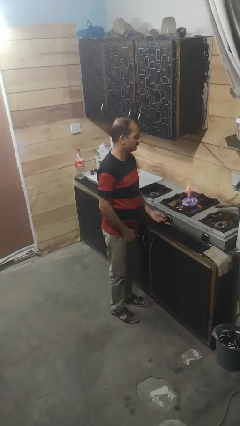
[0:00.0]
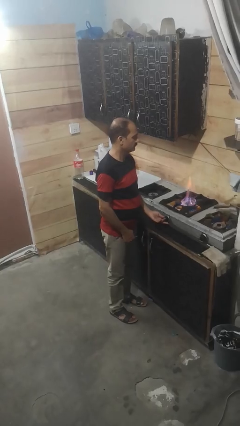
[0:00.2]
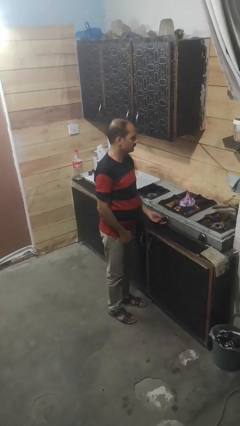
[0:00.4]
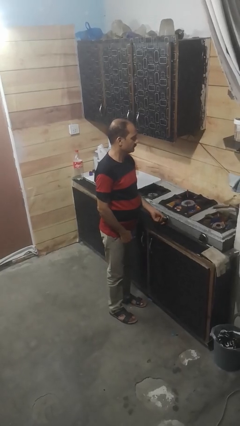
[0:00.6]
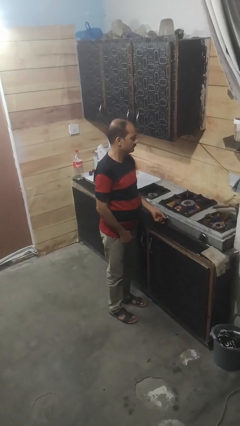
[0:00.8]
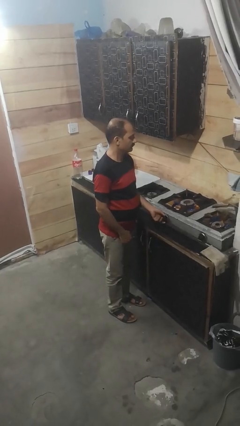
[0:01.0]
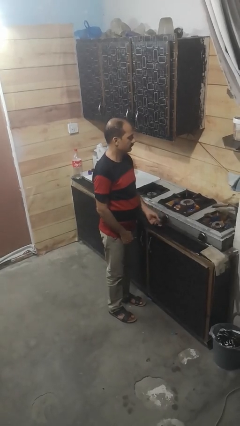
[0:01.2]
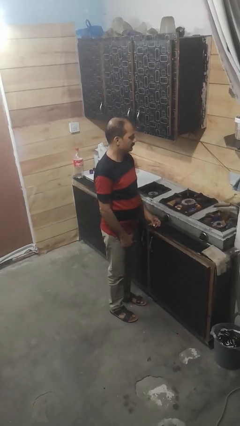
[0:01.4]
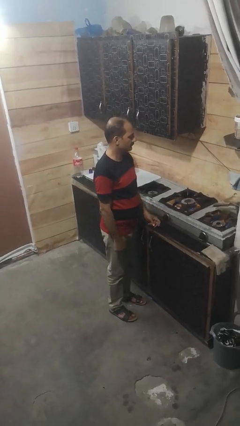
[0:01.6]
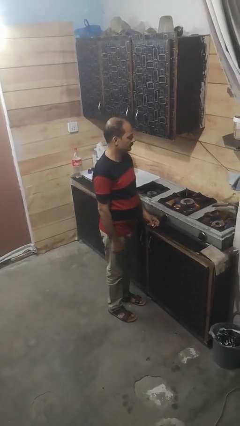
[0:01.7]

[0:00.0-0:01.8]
person turns off stovetop

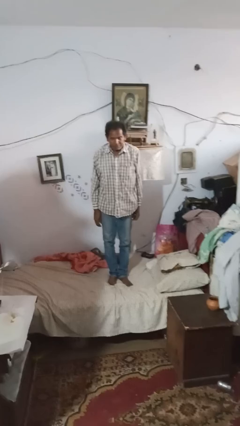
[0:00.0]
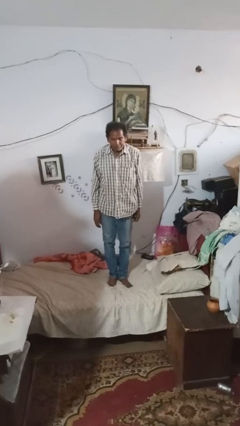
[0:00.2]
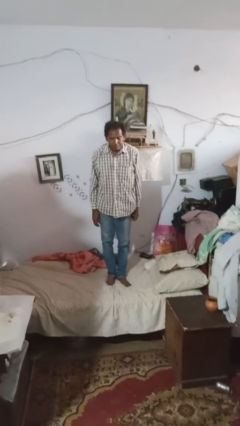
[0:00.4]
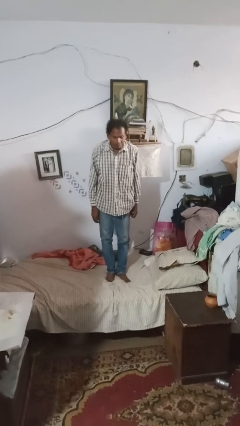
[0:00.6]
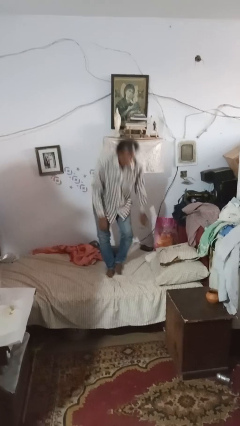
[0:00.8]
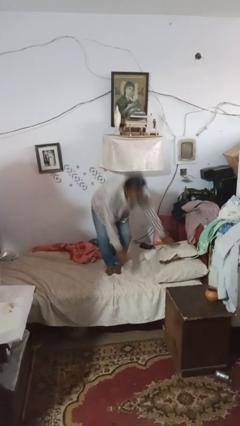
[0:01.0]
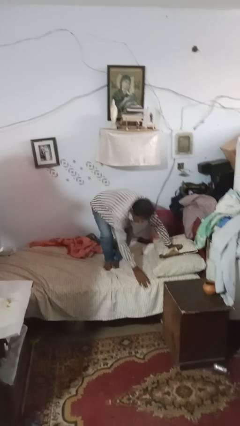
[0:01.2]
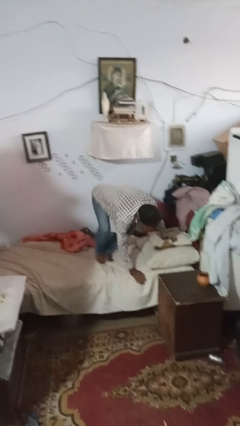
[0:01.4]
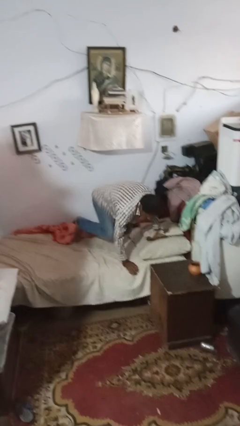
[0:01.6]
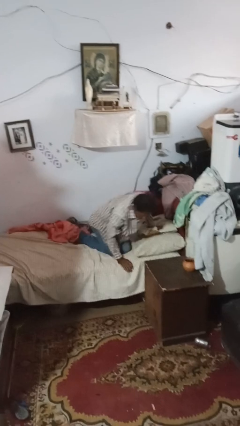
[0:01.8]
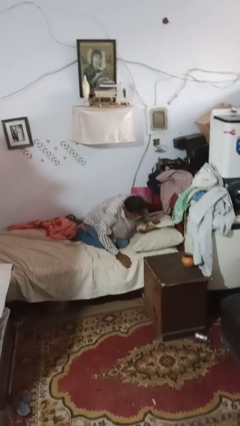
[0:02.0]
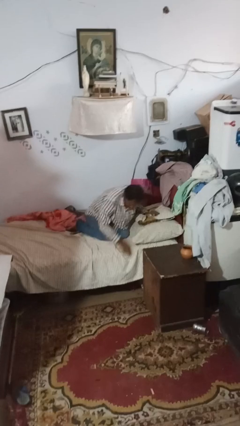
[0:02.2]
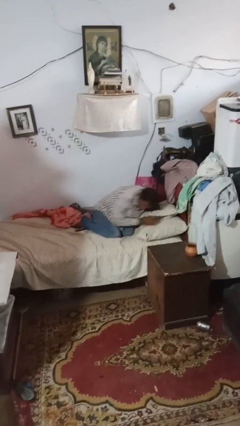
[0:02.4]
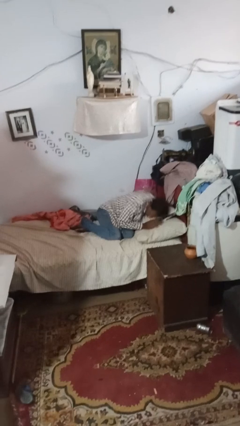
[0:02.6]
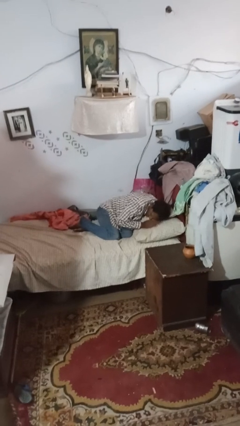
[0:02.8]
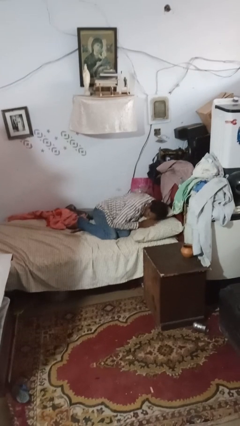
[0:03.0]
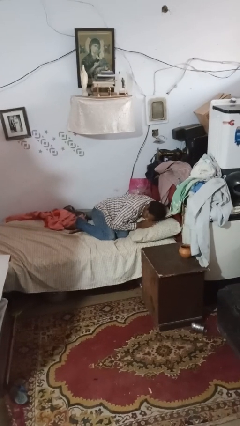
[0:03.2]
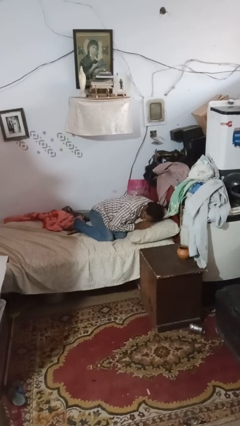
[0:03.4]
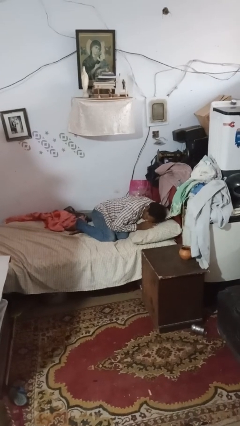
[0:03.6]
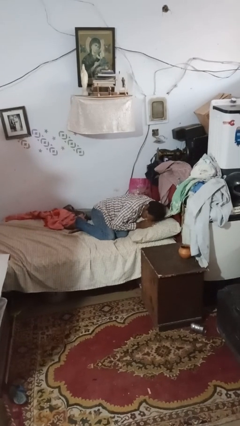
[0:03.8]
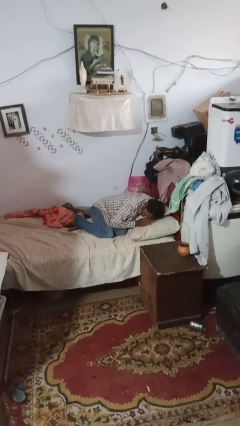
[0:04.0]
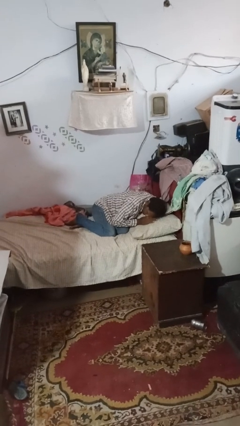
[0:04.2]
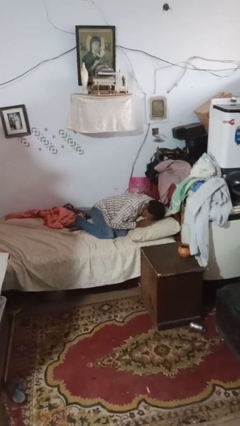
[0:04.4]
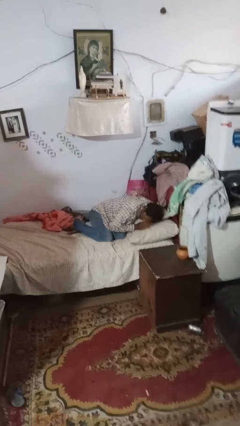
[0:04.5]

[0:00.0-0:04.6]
person lies down on bed

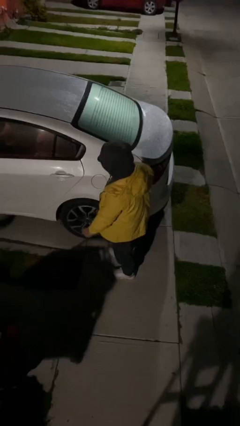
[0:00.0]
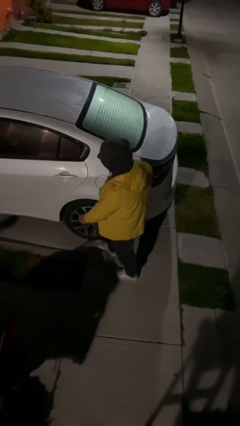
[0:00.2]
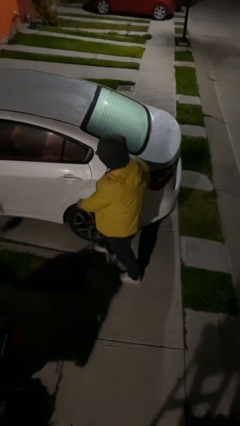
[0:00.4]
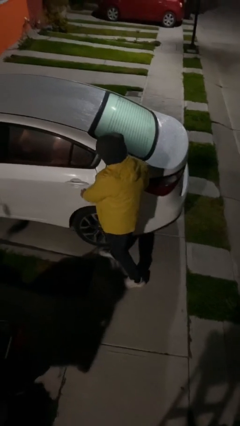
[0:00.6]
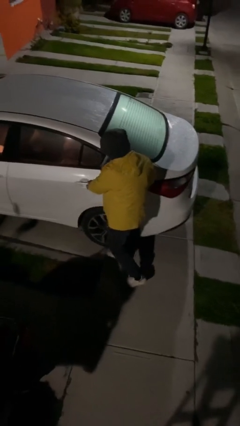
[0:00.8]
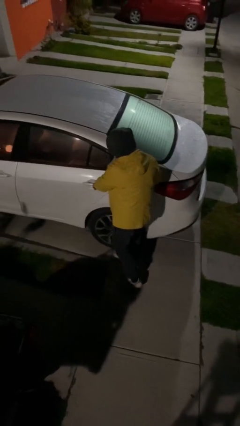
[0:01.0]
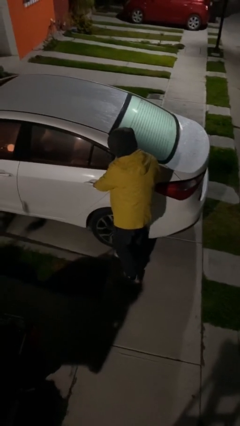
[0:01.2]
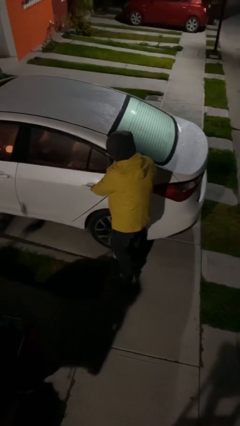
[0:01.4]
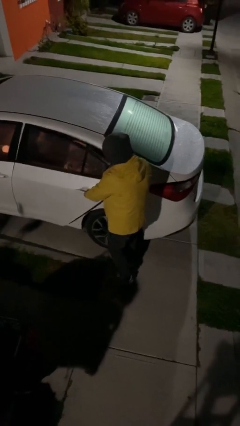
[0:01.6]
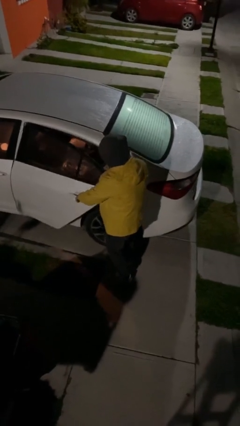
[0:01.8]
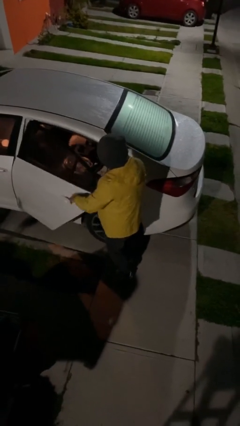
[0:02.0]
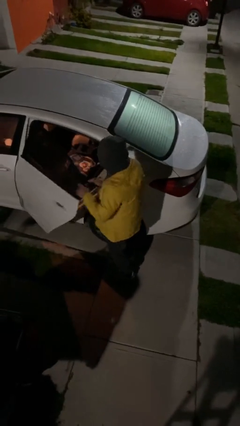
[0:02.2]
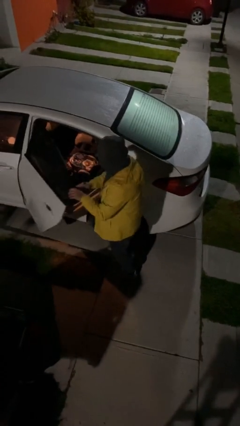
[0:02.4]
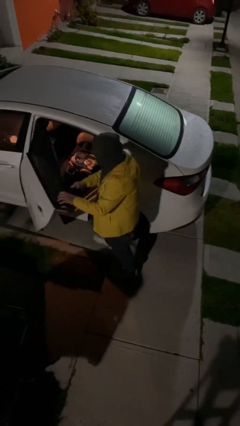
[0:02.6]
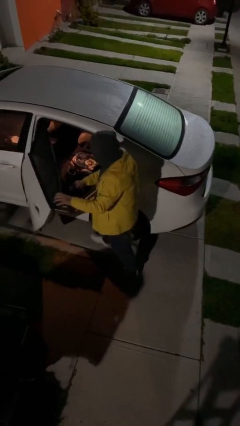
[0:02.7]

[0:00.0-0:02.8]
person opens car door

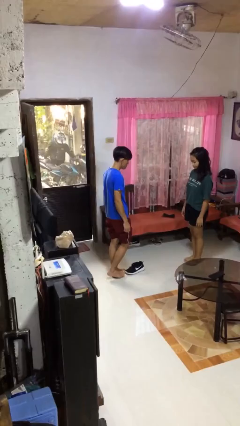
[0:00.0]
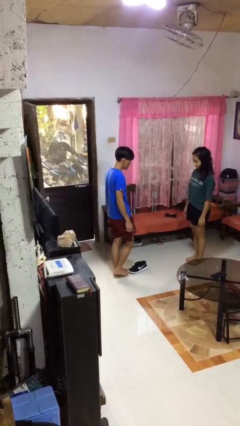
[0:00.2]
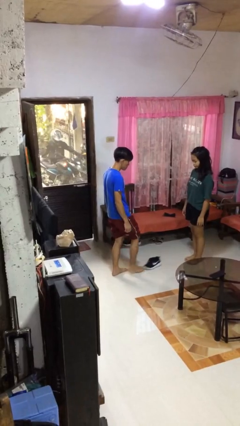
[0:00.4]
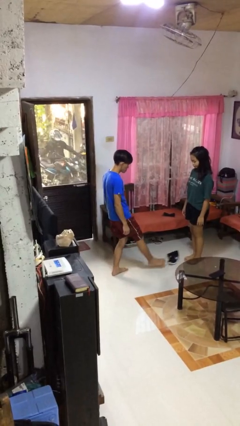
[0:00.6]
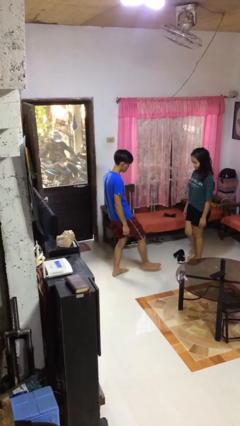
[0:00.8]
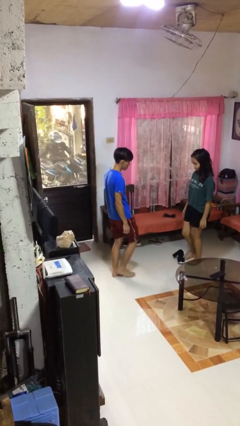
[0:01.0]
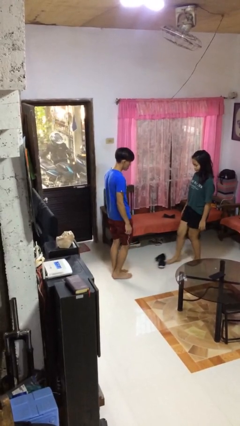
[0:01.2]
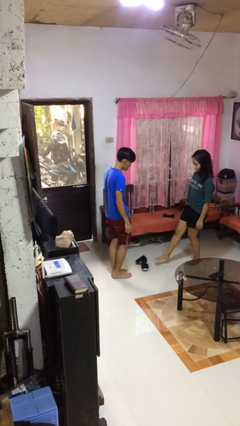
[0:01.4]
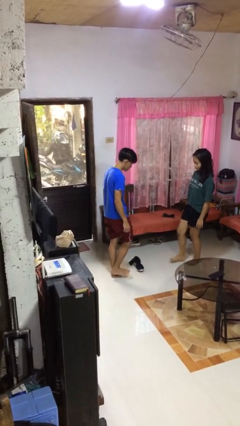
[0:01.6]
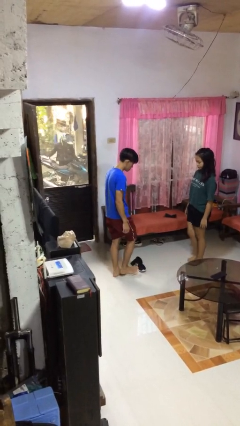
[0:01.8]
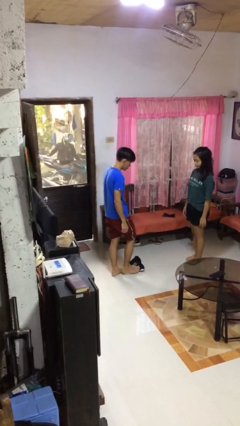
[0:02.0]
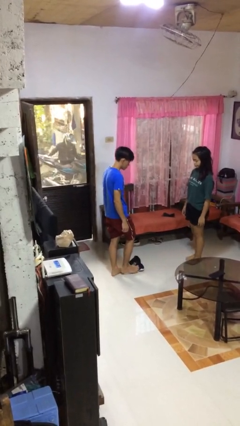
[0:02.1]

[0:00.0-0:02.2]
person kicks object to person

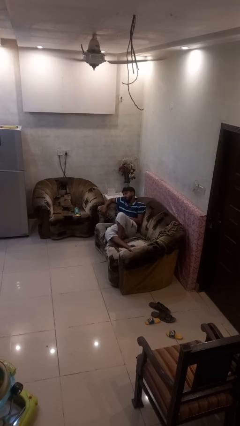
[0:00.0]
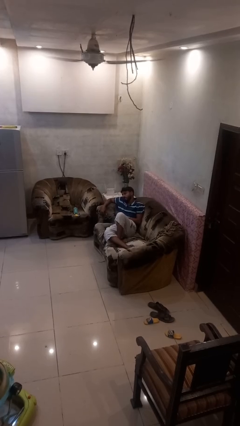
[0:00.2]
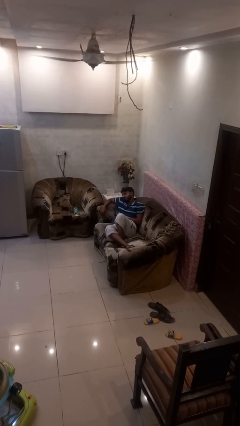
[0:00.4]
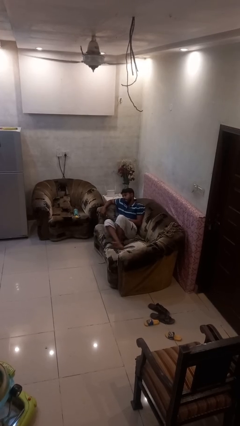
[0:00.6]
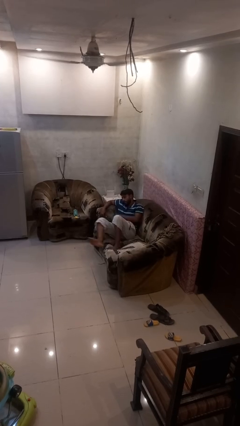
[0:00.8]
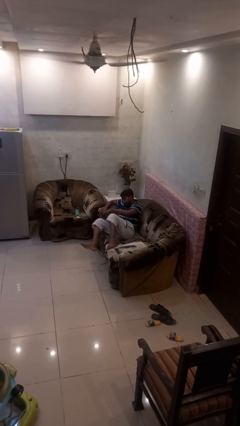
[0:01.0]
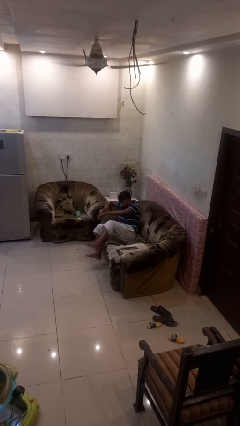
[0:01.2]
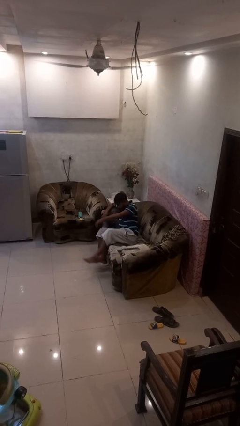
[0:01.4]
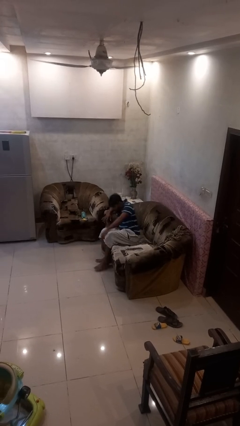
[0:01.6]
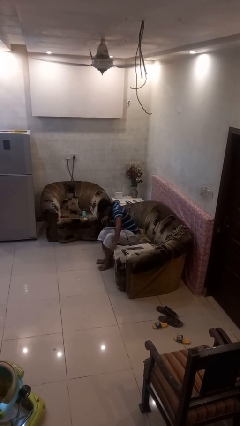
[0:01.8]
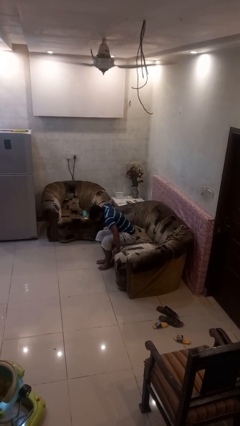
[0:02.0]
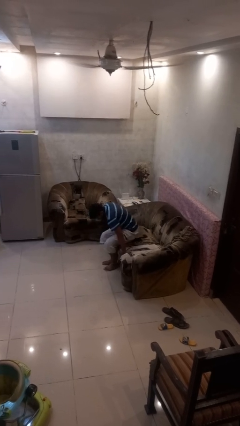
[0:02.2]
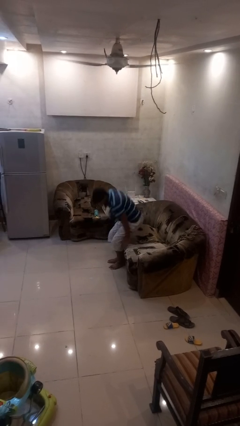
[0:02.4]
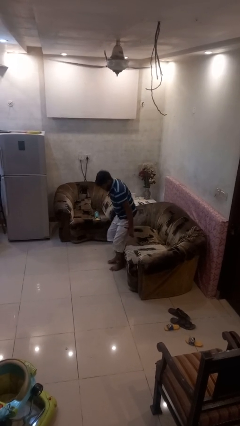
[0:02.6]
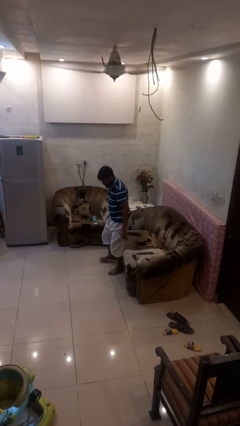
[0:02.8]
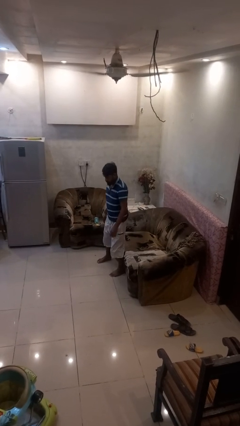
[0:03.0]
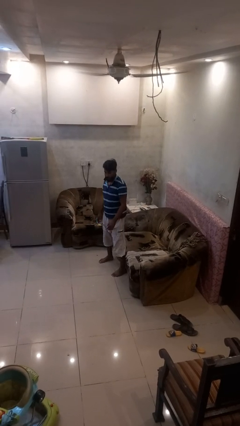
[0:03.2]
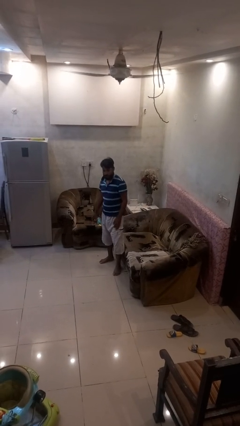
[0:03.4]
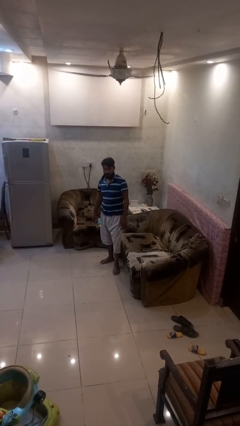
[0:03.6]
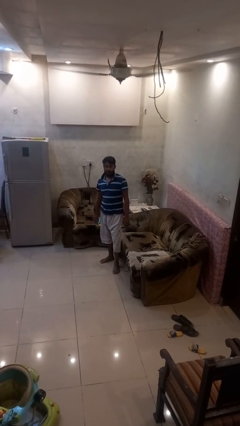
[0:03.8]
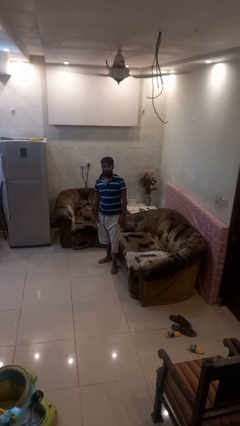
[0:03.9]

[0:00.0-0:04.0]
person stands up

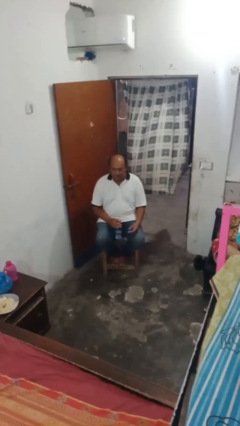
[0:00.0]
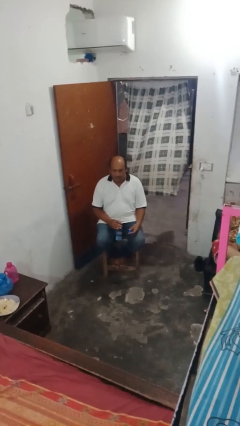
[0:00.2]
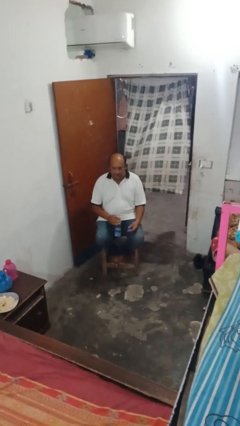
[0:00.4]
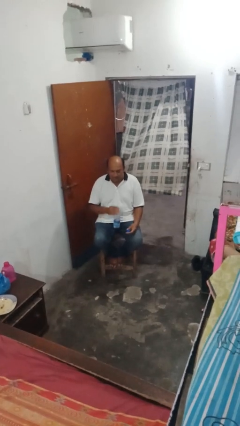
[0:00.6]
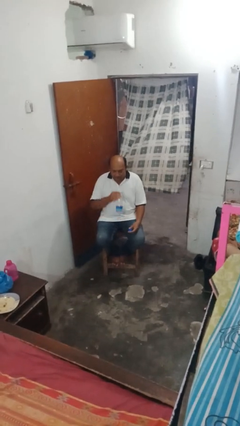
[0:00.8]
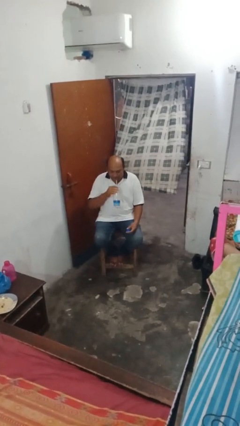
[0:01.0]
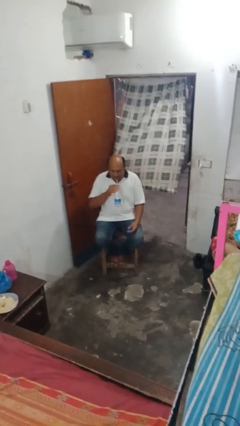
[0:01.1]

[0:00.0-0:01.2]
person drinks from straw

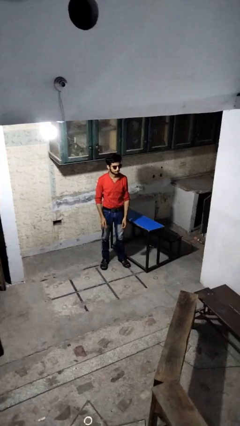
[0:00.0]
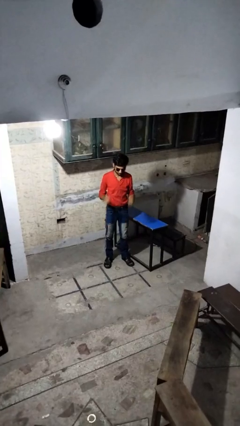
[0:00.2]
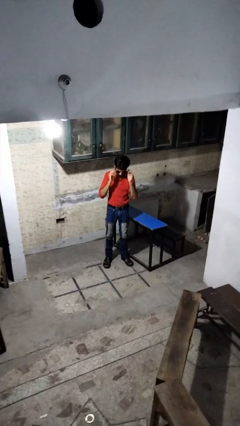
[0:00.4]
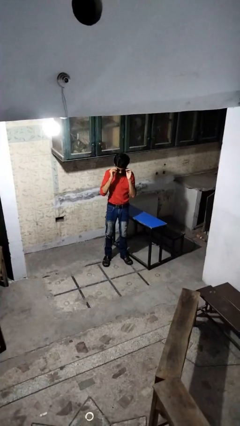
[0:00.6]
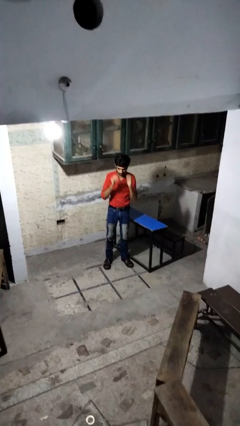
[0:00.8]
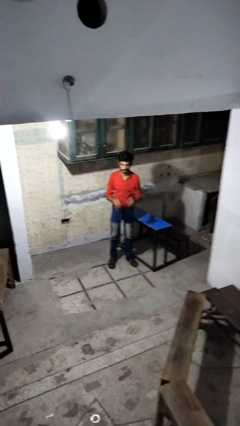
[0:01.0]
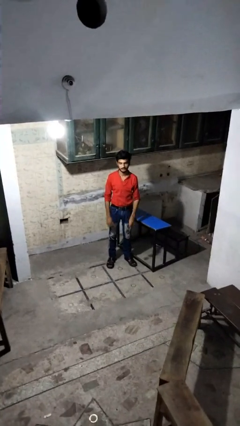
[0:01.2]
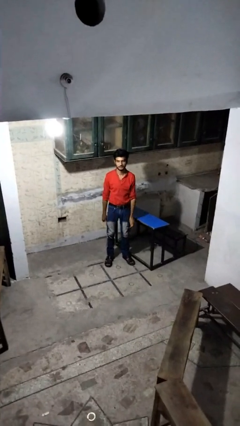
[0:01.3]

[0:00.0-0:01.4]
person takes off sunglasses
